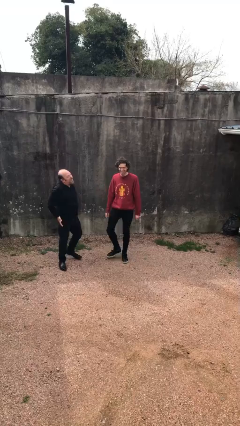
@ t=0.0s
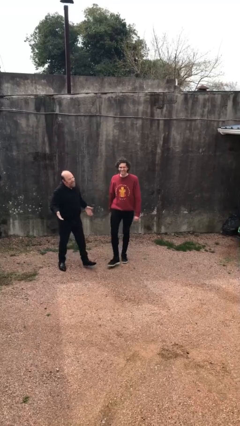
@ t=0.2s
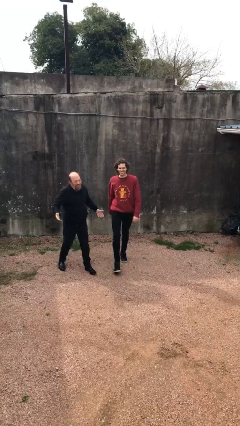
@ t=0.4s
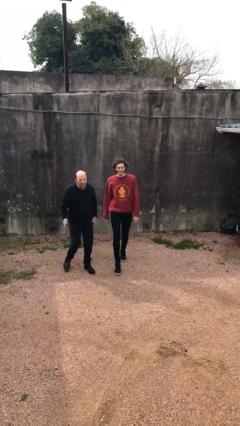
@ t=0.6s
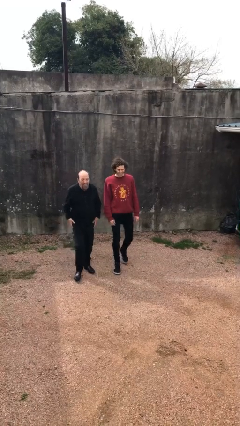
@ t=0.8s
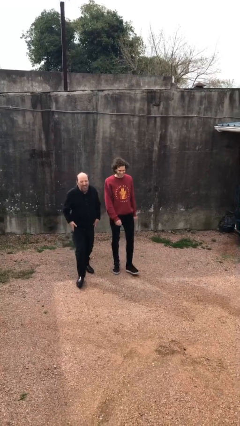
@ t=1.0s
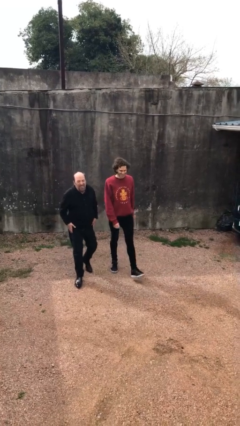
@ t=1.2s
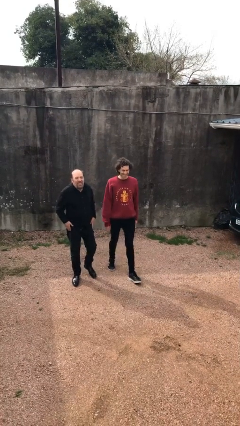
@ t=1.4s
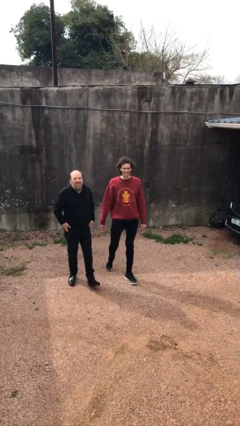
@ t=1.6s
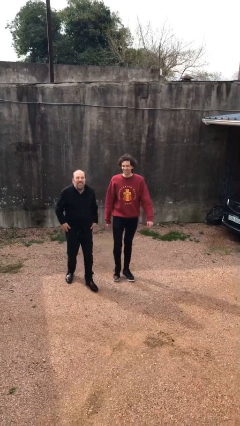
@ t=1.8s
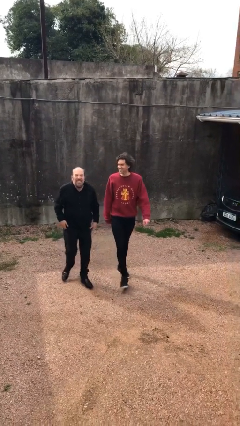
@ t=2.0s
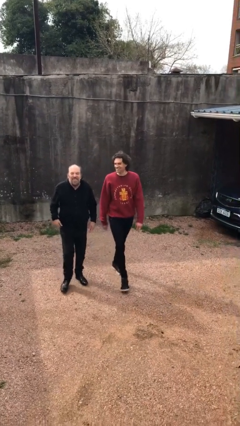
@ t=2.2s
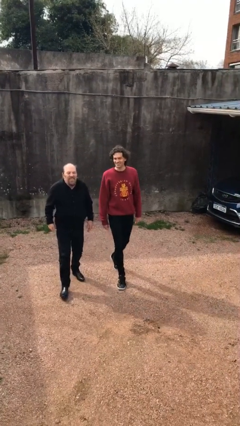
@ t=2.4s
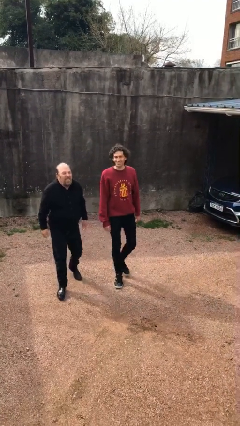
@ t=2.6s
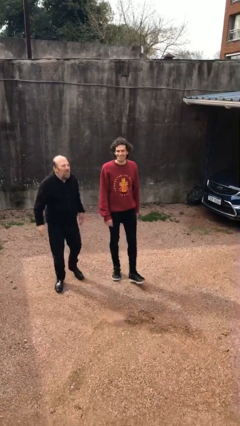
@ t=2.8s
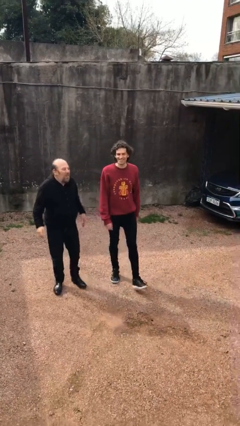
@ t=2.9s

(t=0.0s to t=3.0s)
person talks to person

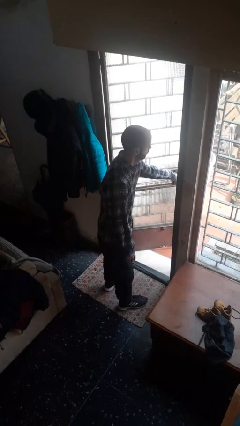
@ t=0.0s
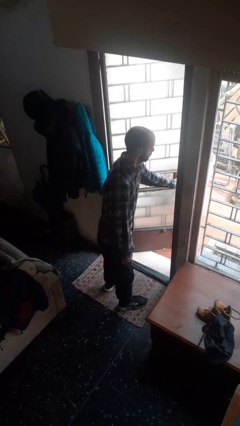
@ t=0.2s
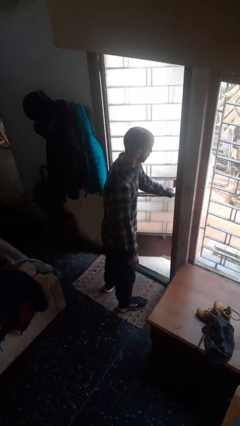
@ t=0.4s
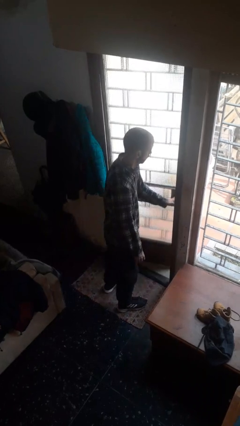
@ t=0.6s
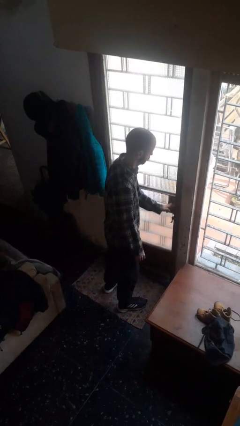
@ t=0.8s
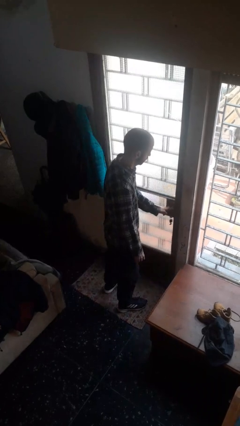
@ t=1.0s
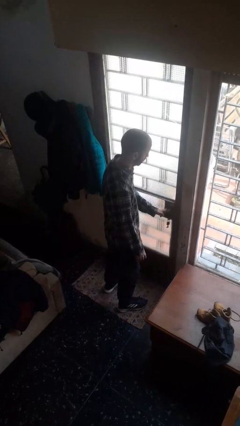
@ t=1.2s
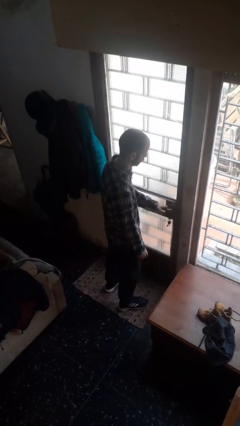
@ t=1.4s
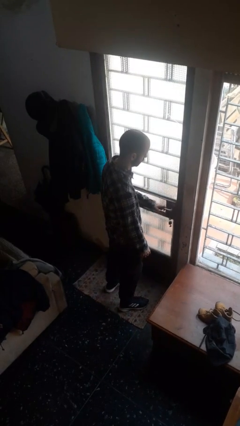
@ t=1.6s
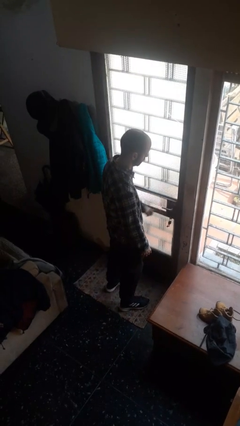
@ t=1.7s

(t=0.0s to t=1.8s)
person closes facility door

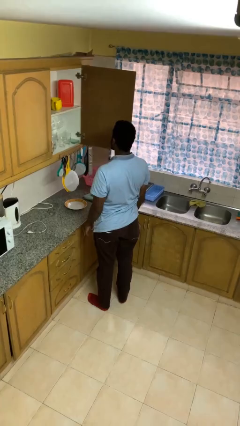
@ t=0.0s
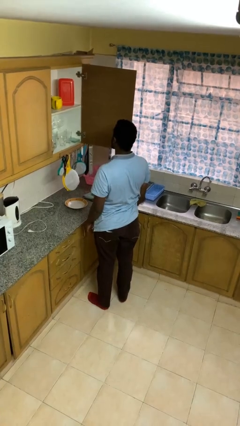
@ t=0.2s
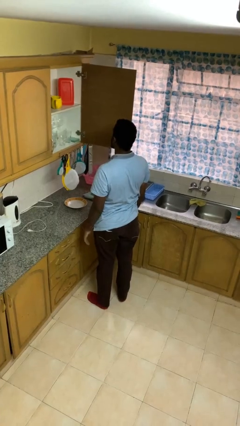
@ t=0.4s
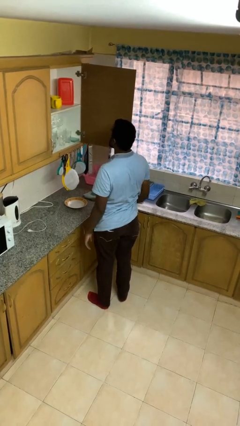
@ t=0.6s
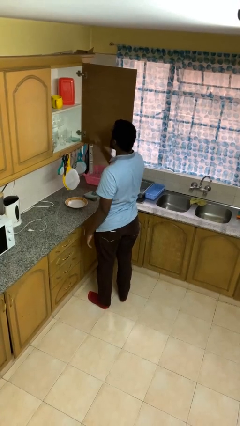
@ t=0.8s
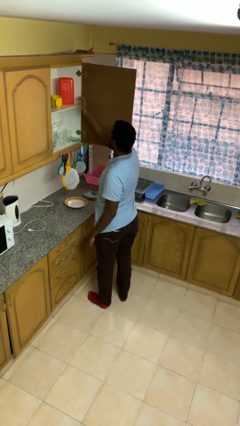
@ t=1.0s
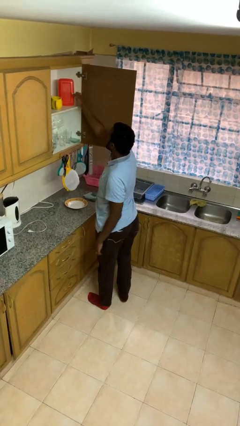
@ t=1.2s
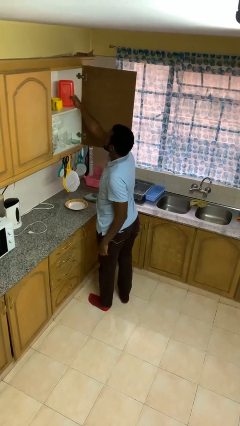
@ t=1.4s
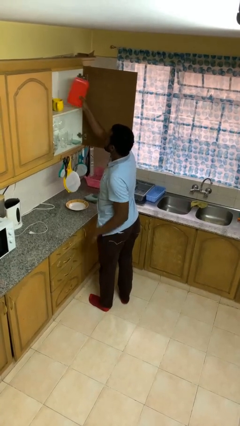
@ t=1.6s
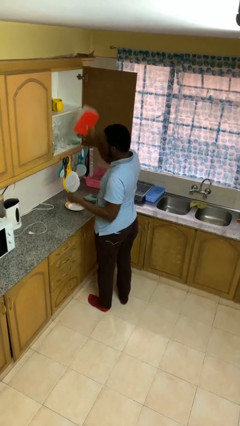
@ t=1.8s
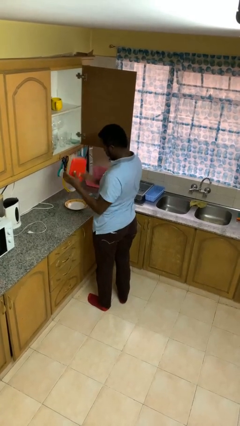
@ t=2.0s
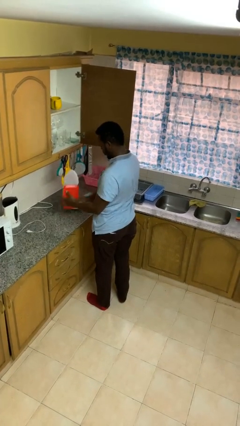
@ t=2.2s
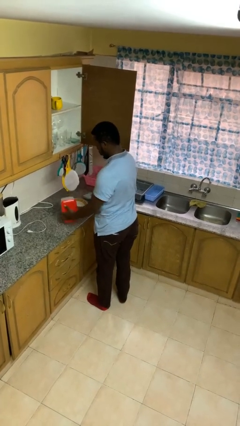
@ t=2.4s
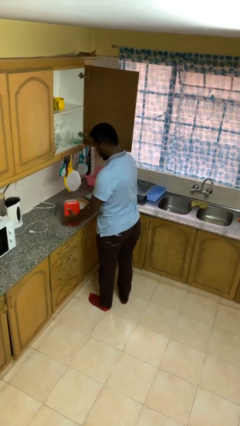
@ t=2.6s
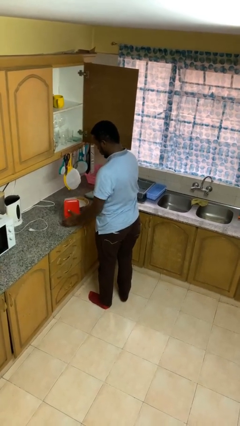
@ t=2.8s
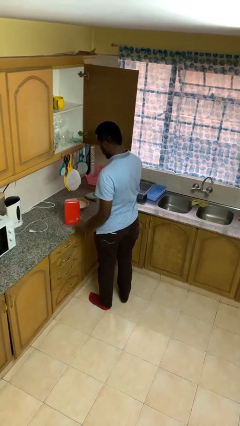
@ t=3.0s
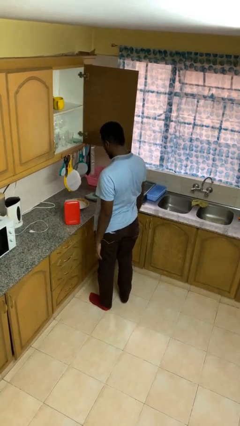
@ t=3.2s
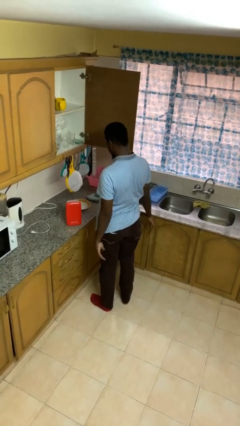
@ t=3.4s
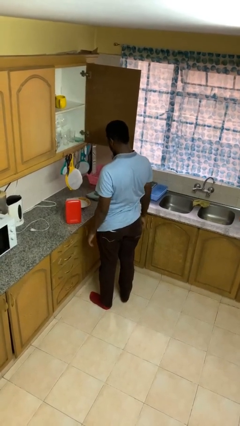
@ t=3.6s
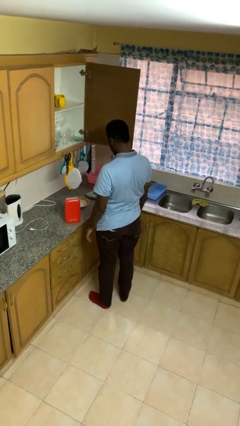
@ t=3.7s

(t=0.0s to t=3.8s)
person takes object from cabinet

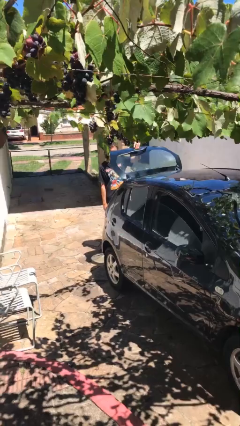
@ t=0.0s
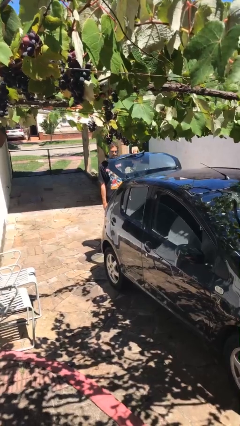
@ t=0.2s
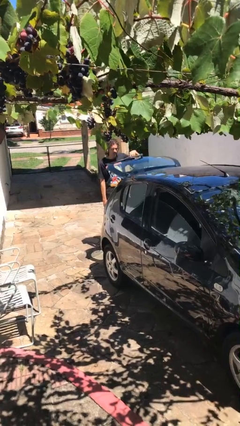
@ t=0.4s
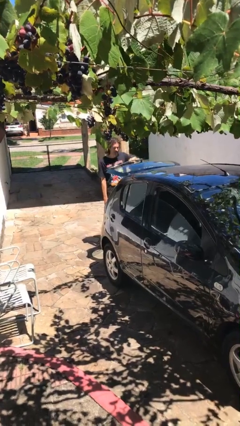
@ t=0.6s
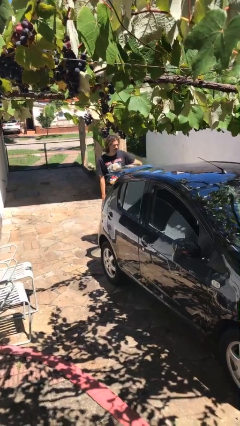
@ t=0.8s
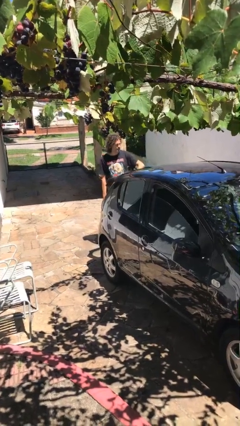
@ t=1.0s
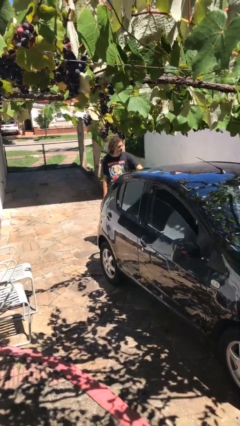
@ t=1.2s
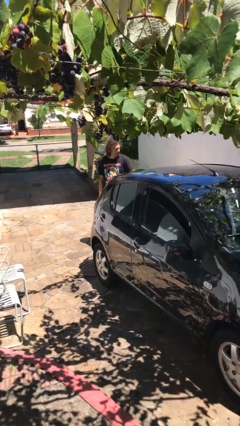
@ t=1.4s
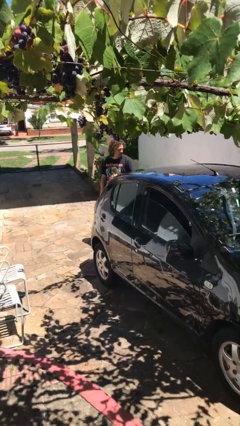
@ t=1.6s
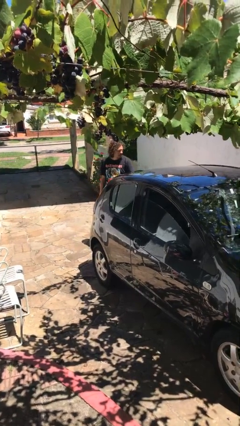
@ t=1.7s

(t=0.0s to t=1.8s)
person closes car trunk

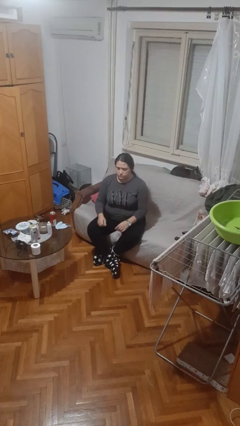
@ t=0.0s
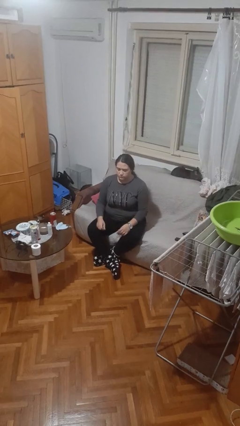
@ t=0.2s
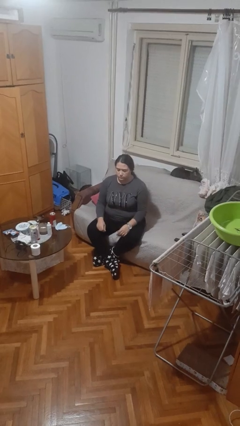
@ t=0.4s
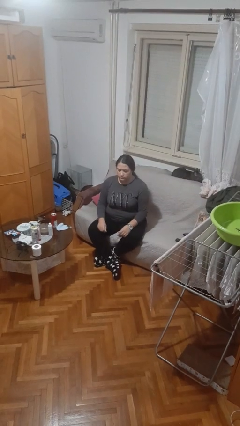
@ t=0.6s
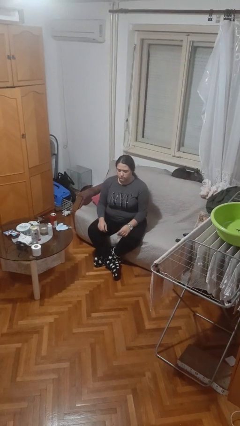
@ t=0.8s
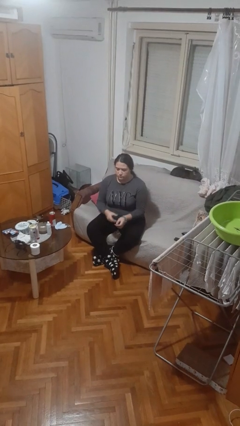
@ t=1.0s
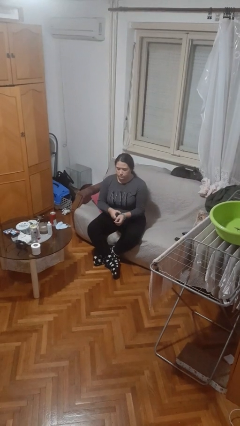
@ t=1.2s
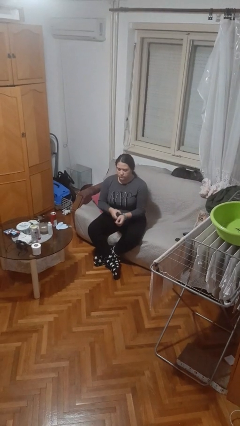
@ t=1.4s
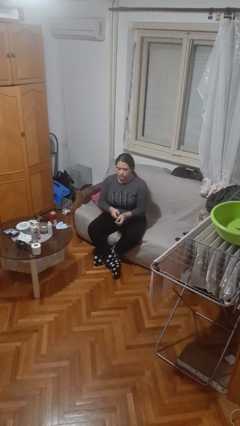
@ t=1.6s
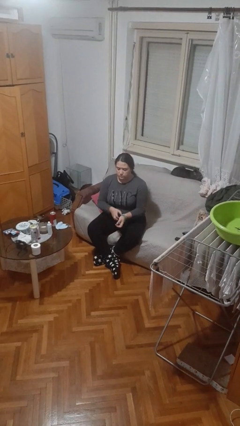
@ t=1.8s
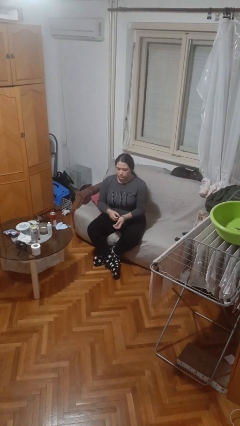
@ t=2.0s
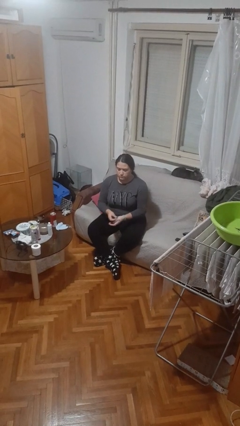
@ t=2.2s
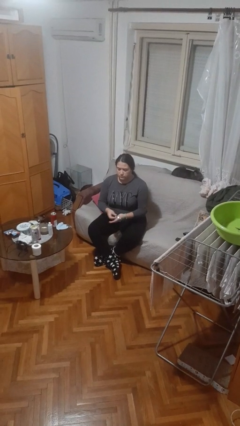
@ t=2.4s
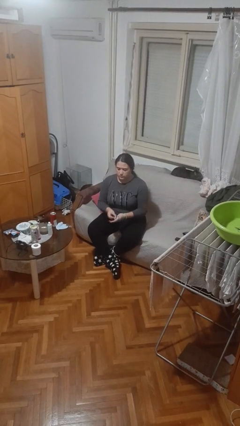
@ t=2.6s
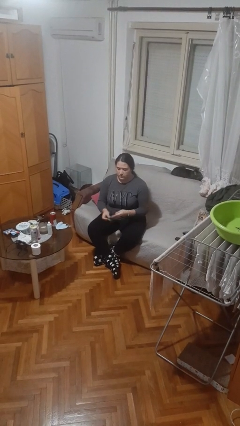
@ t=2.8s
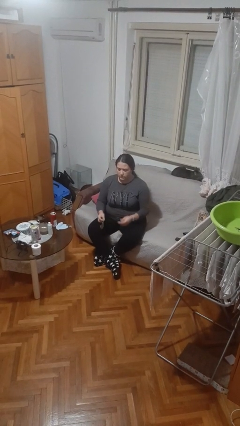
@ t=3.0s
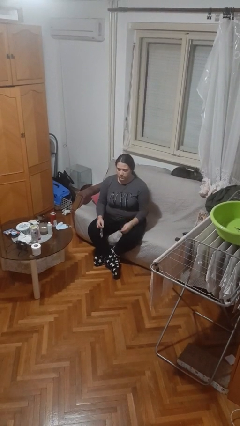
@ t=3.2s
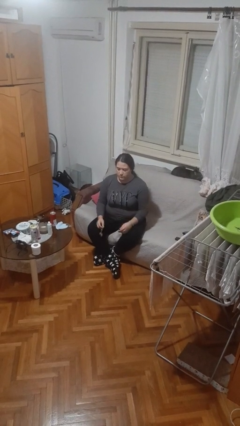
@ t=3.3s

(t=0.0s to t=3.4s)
person takes off wristwatch

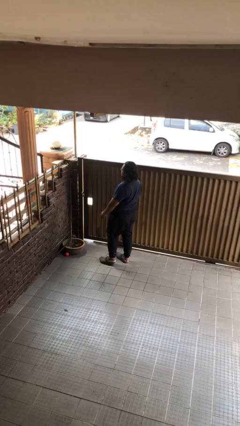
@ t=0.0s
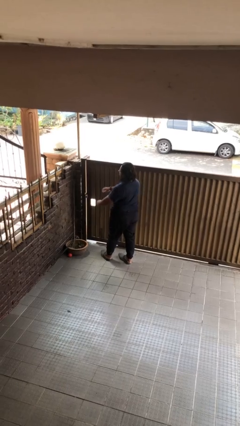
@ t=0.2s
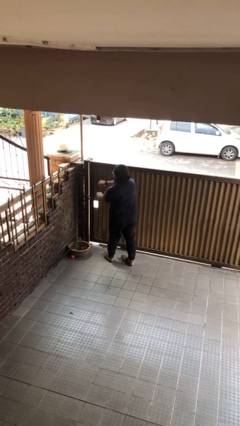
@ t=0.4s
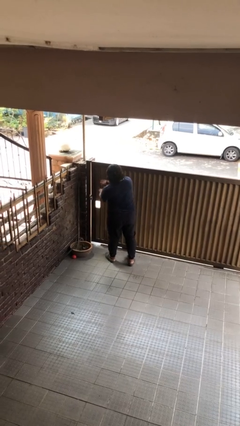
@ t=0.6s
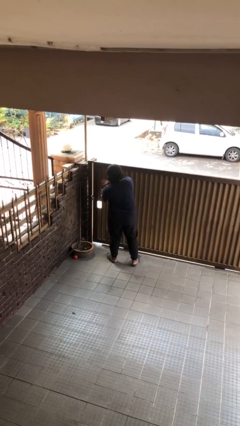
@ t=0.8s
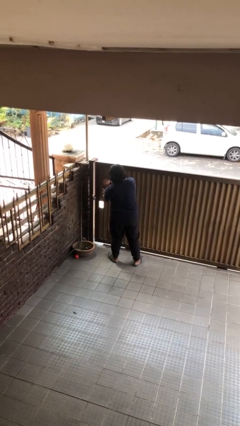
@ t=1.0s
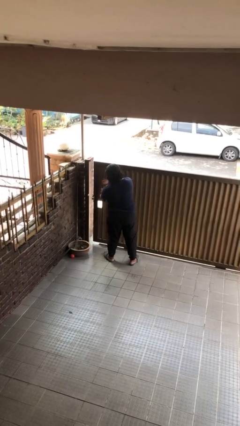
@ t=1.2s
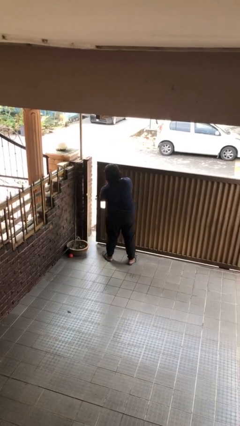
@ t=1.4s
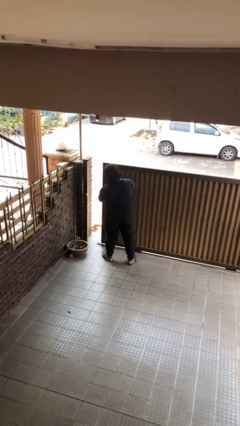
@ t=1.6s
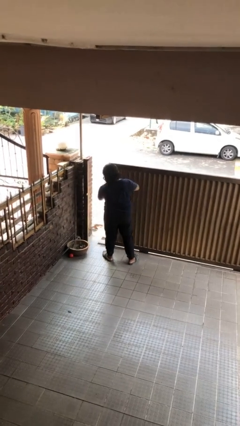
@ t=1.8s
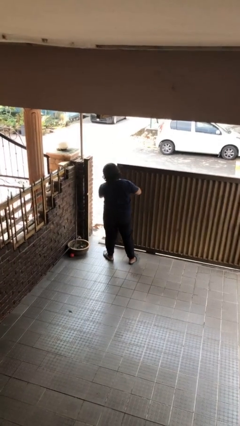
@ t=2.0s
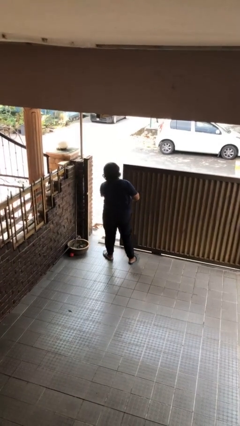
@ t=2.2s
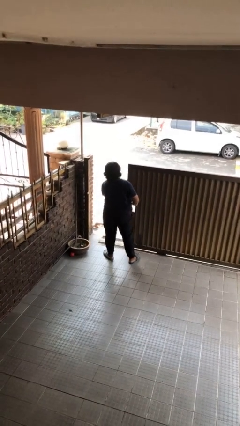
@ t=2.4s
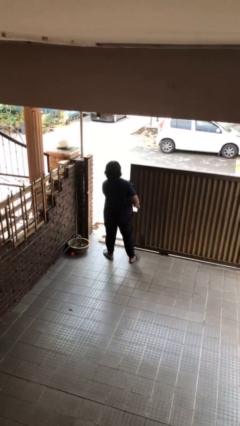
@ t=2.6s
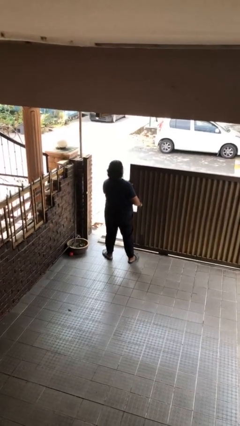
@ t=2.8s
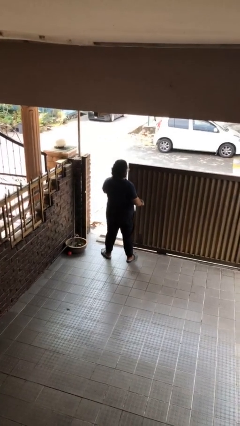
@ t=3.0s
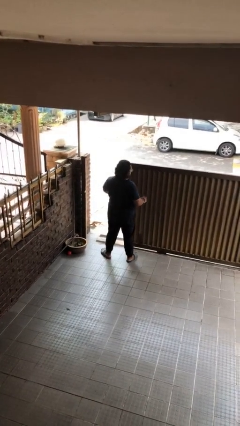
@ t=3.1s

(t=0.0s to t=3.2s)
person opens facility door

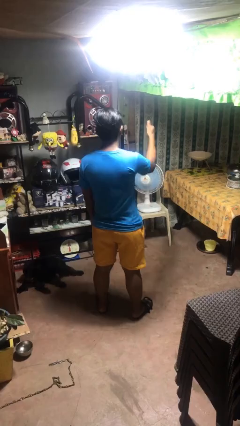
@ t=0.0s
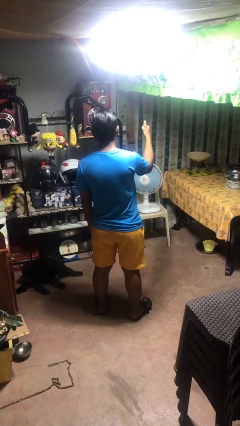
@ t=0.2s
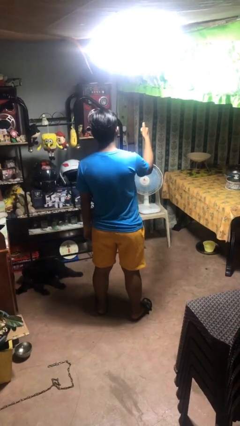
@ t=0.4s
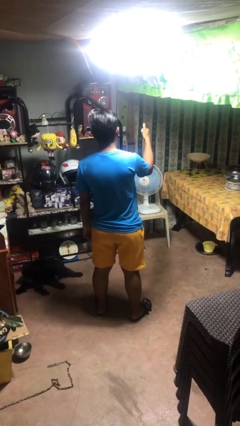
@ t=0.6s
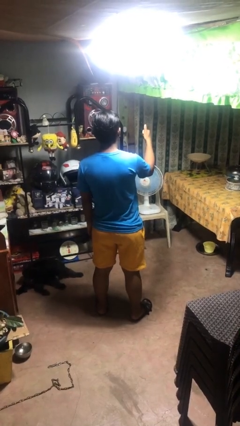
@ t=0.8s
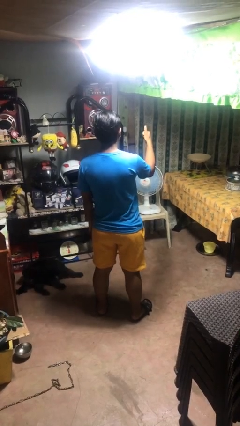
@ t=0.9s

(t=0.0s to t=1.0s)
person gestures thumbs up
